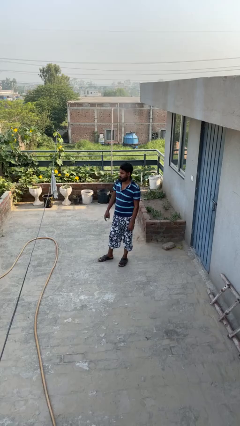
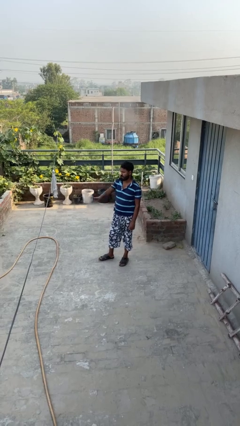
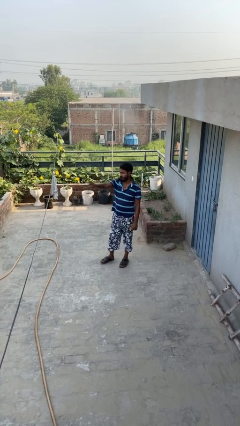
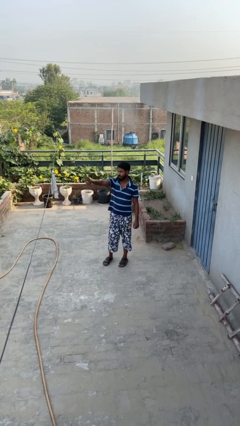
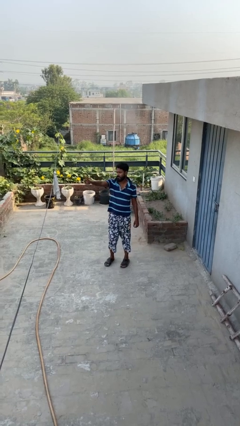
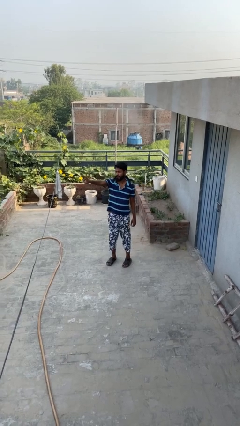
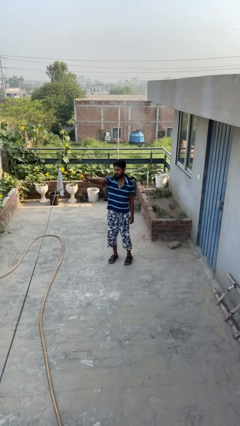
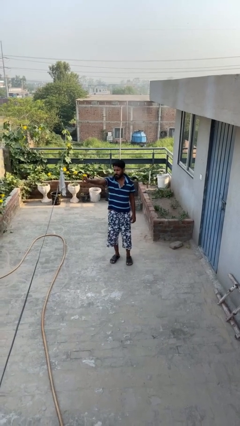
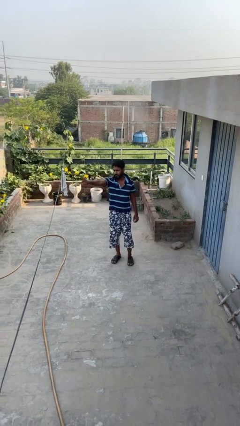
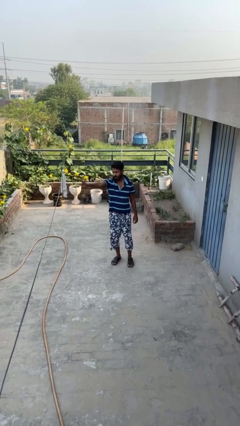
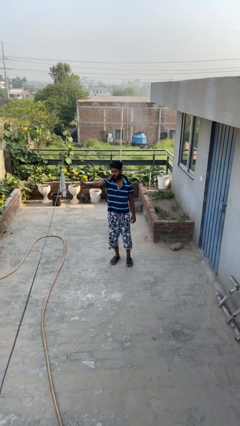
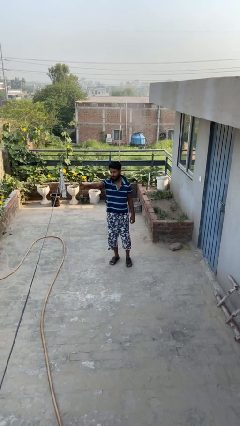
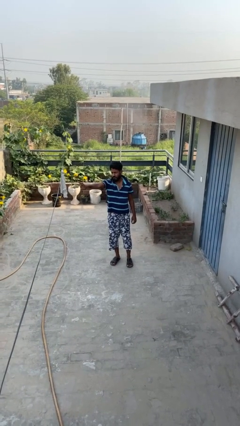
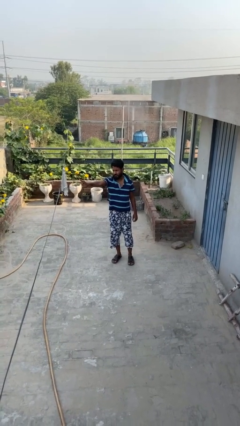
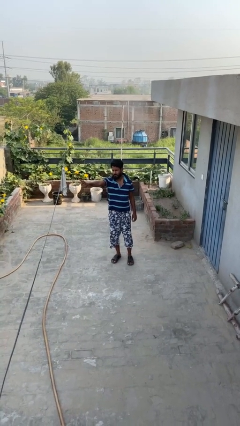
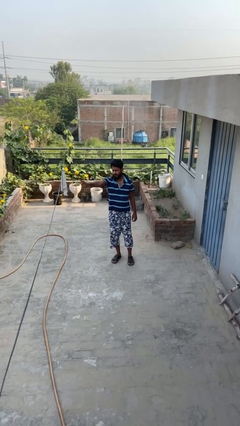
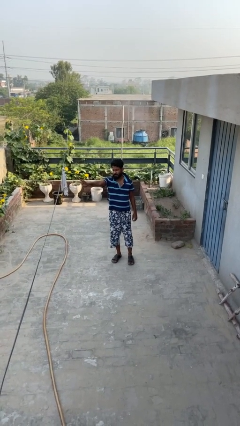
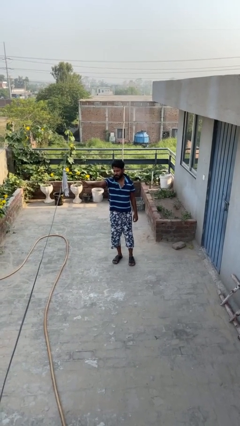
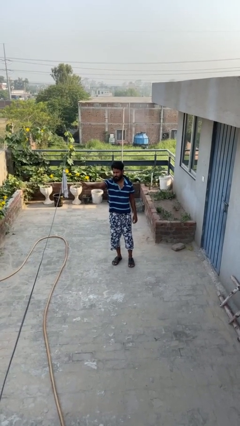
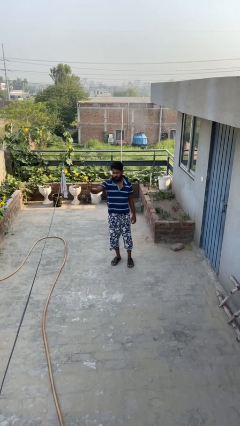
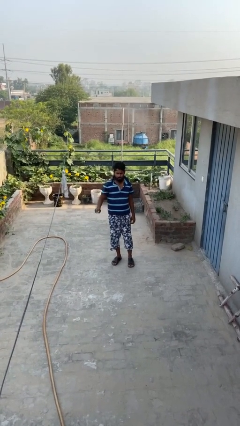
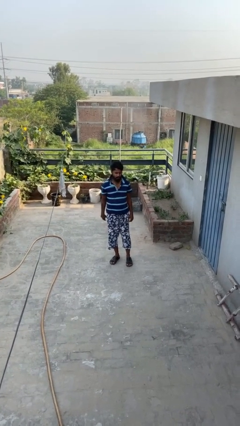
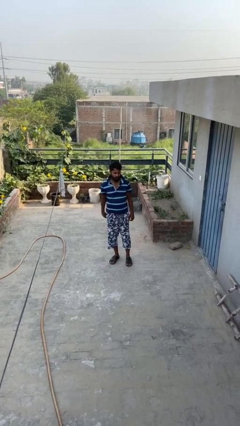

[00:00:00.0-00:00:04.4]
person gestures peace

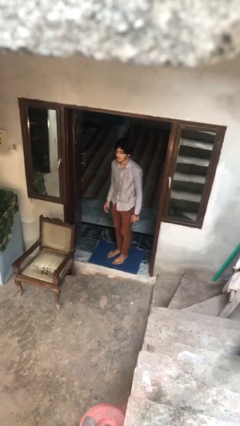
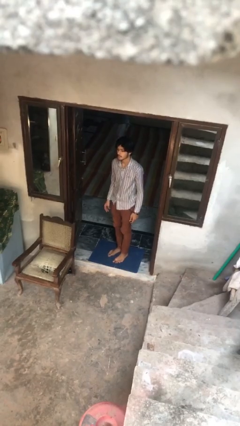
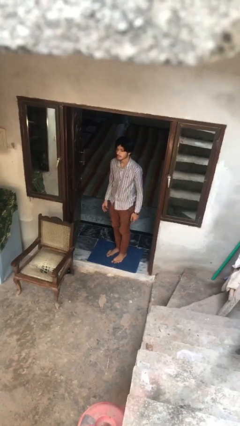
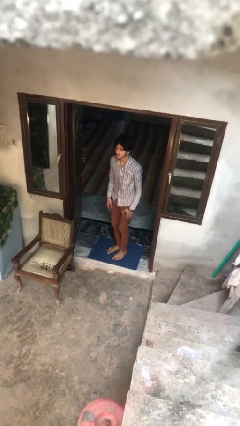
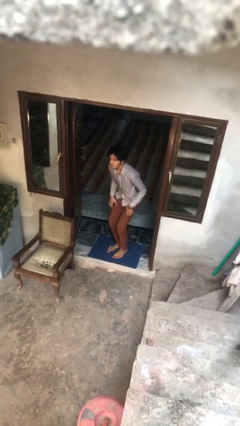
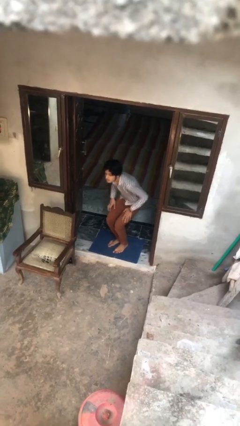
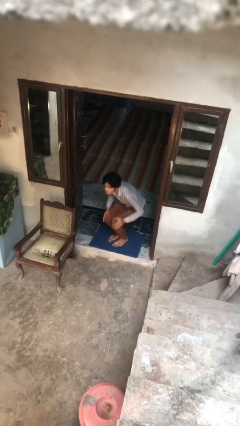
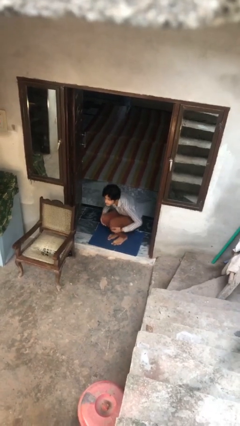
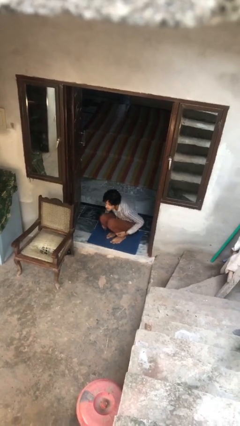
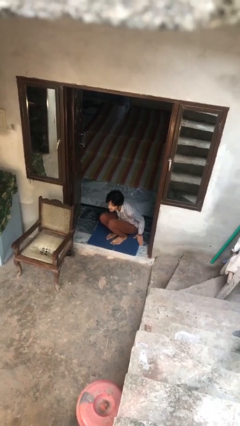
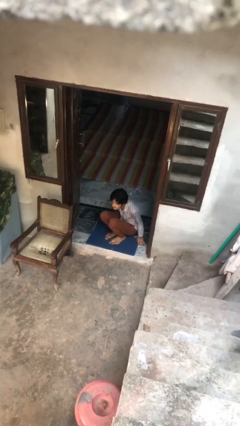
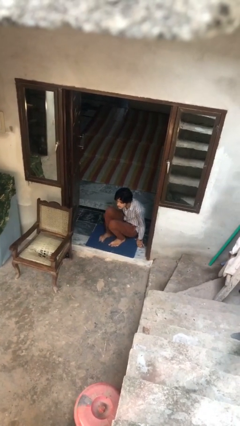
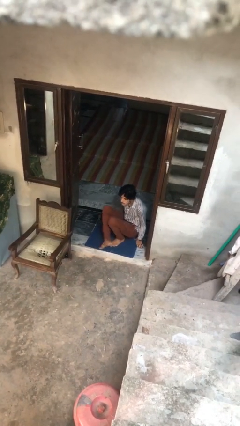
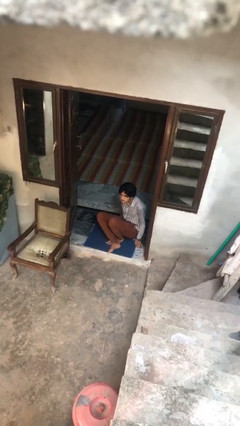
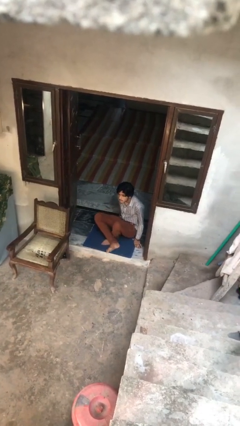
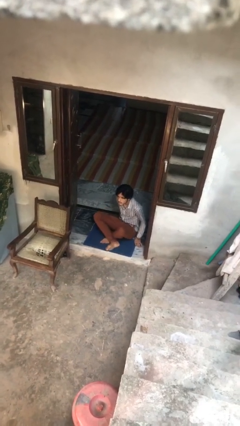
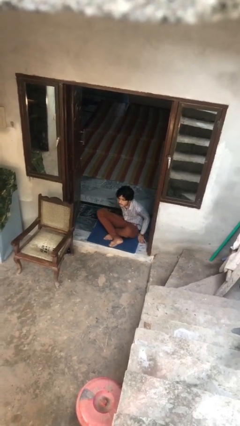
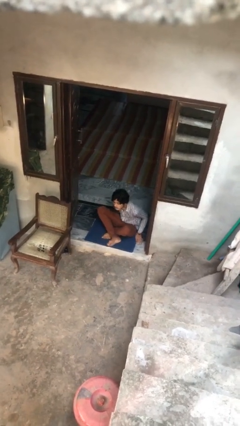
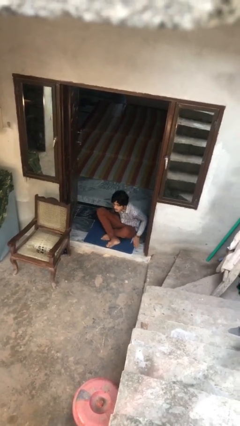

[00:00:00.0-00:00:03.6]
person sits crisscross

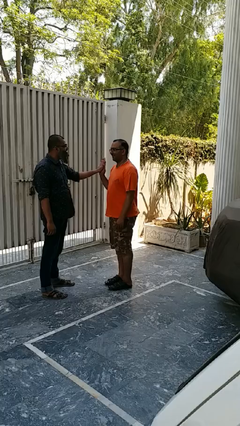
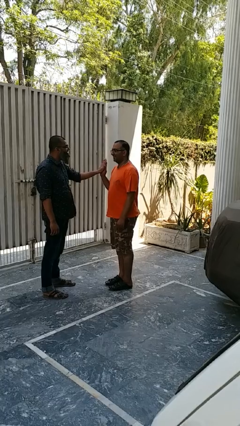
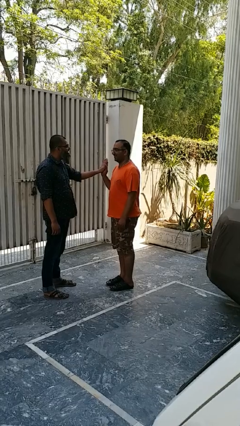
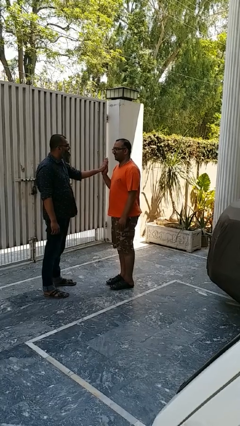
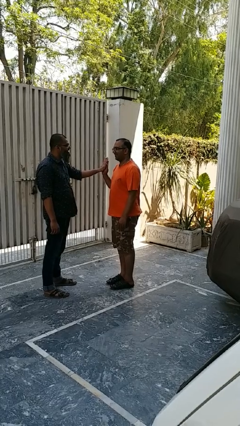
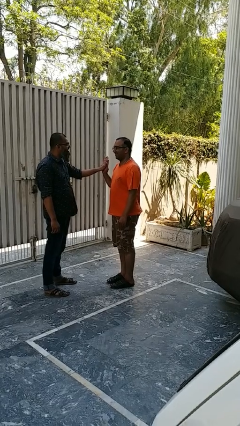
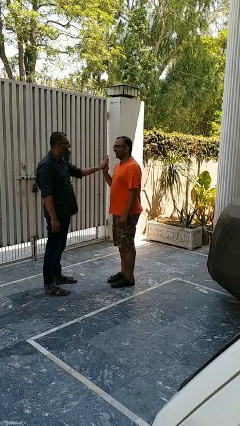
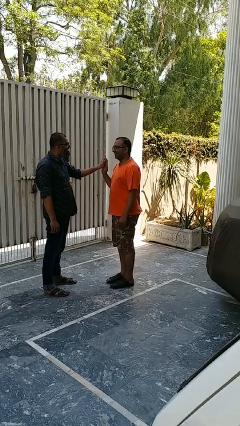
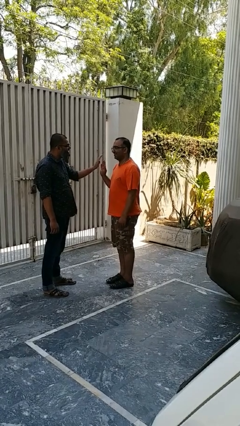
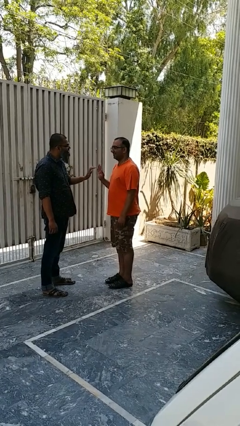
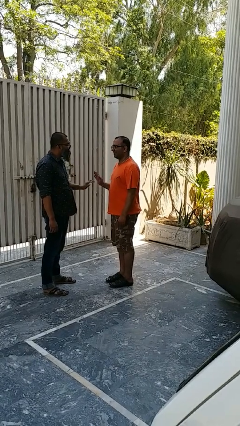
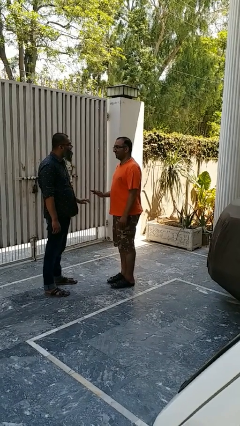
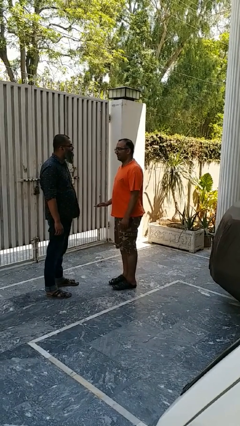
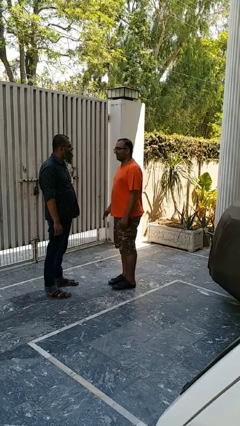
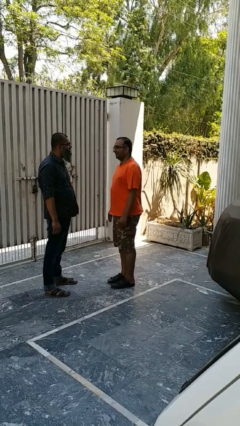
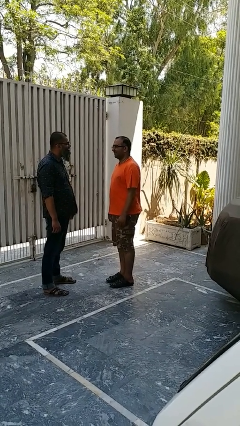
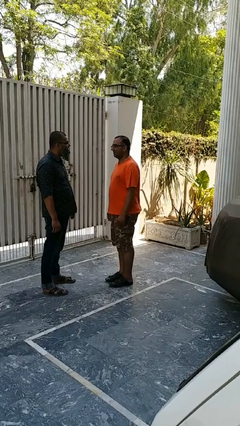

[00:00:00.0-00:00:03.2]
person highfives hand

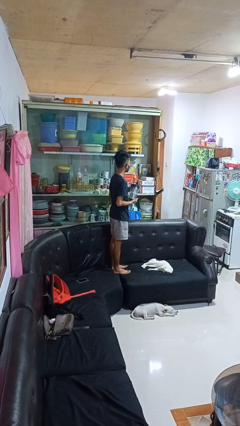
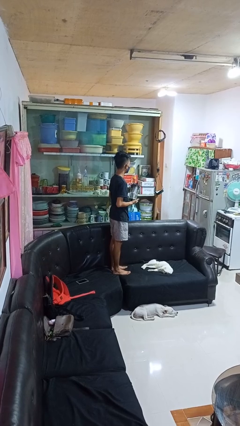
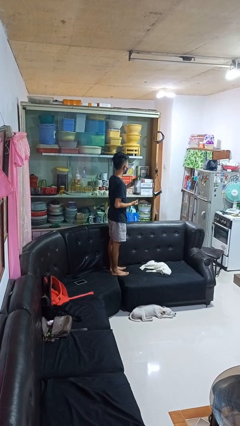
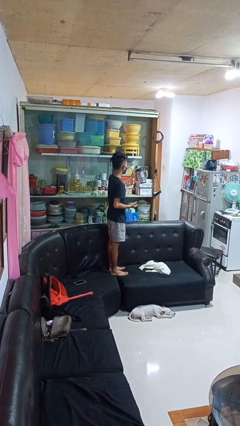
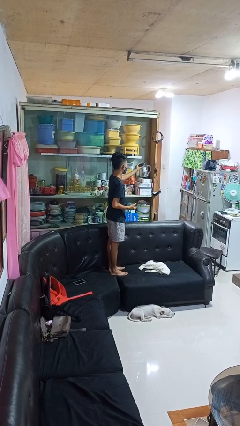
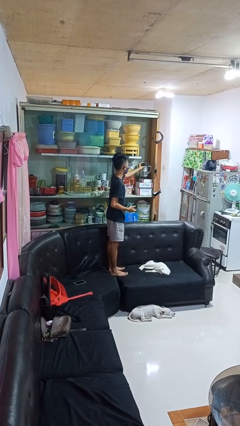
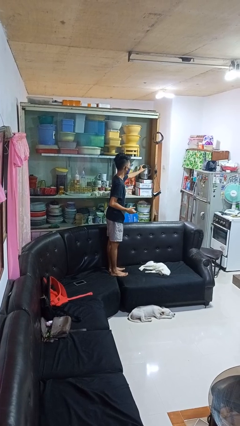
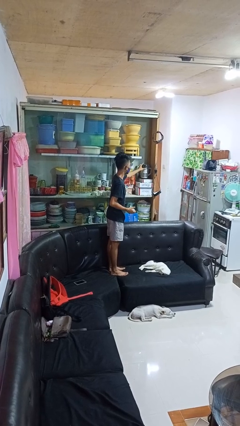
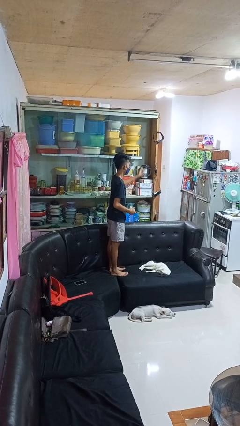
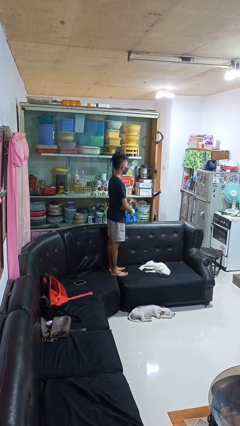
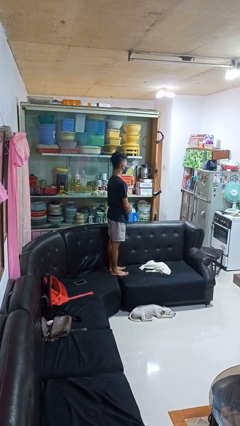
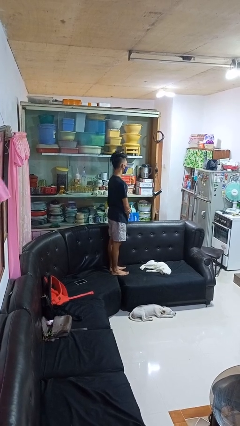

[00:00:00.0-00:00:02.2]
person puts down object into cabinet

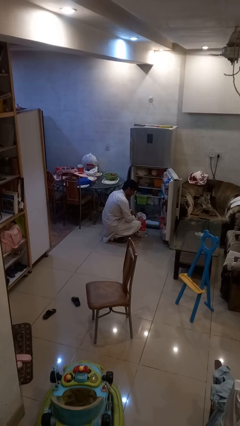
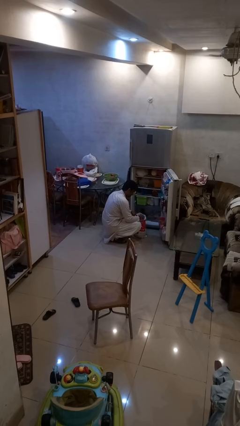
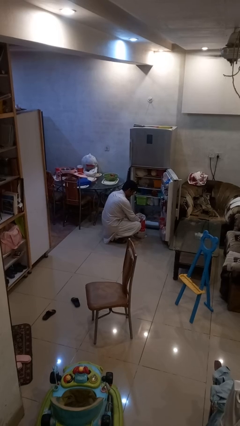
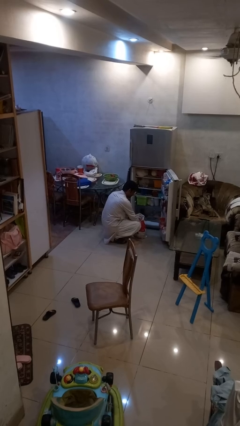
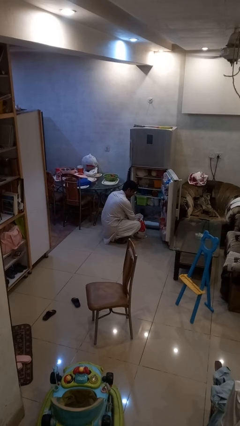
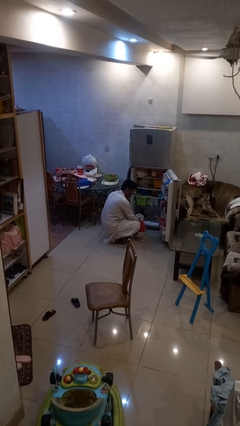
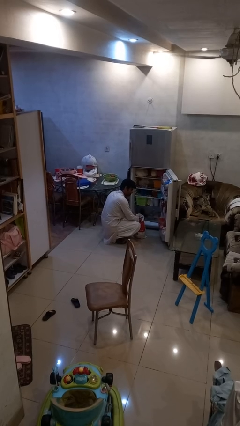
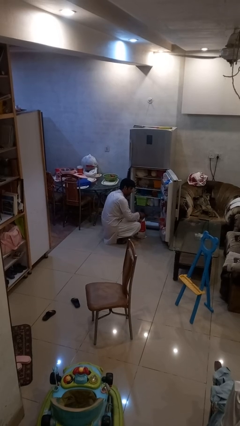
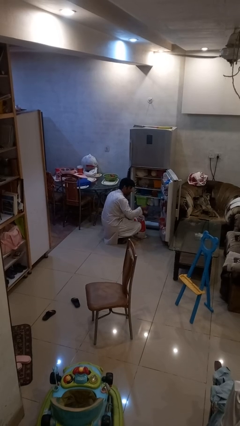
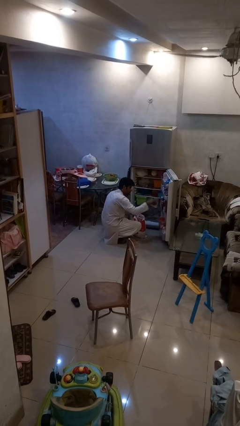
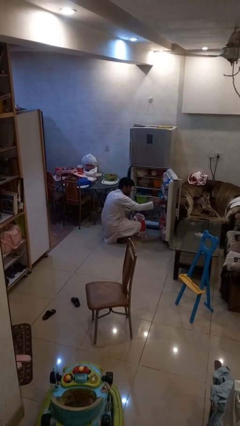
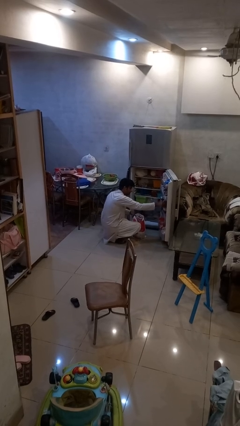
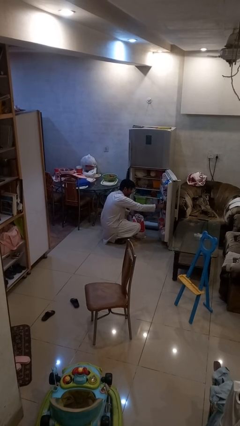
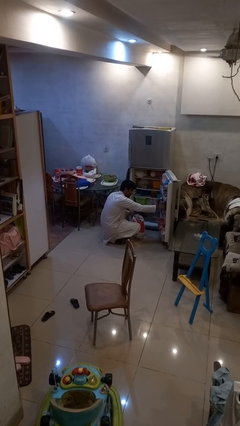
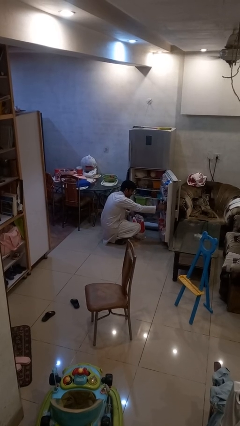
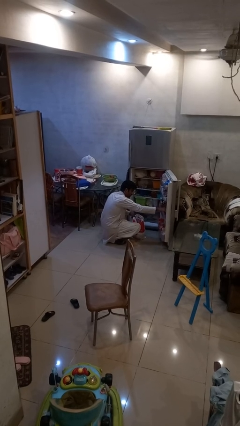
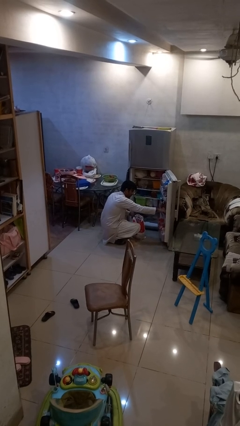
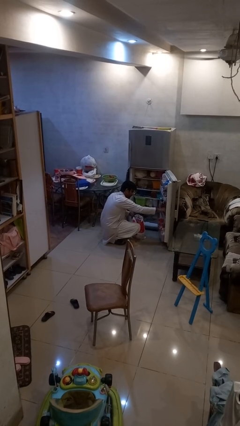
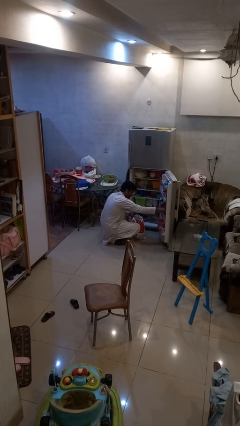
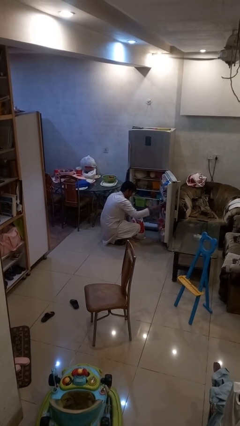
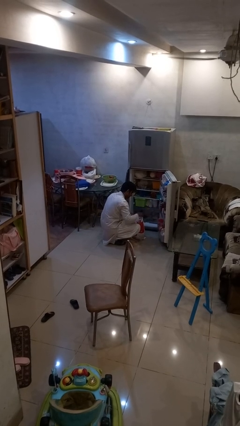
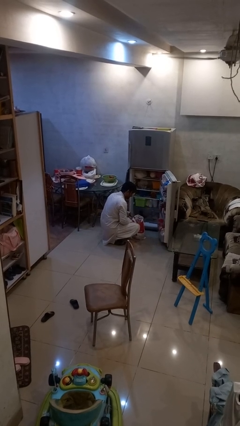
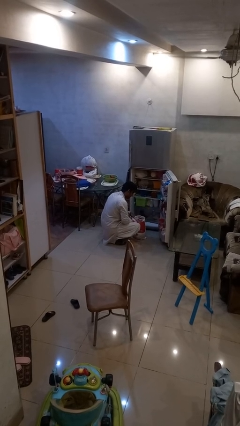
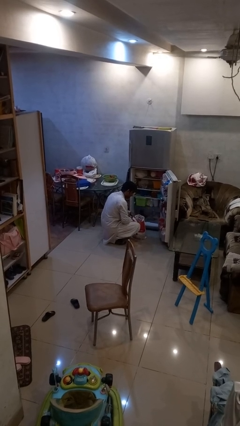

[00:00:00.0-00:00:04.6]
person loads groceries into refrigerator
